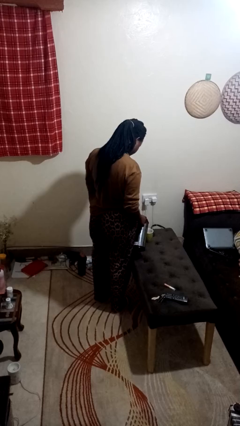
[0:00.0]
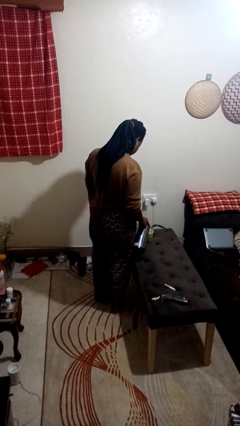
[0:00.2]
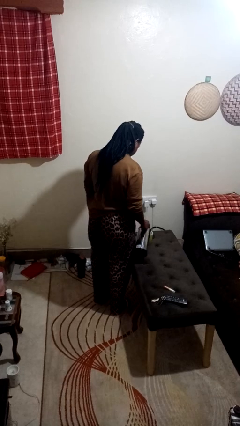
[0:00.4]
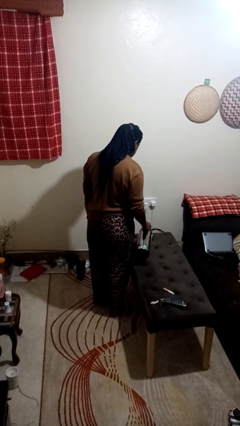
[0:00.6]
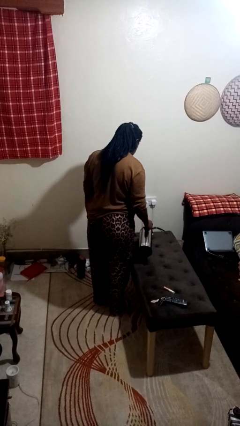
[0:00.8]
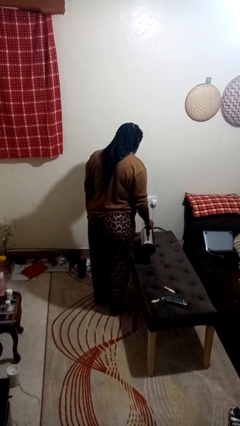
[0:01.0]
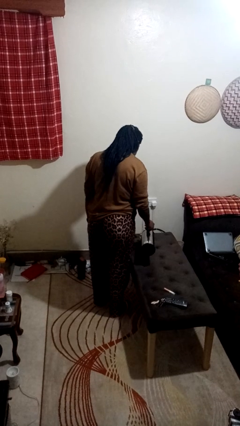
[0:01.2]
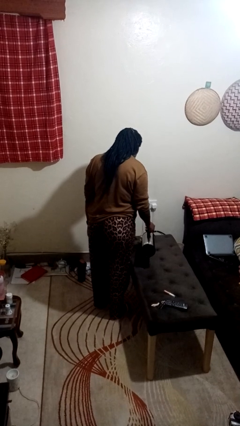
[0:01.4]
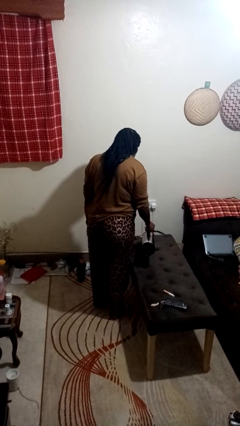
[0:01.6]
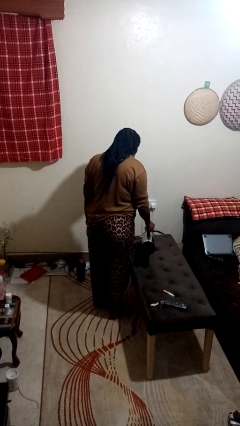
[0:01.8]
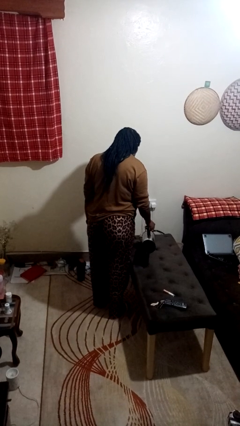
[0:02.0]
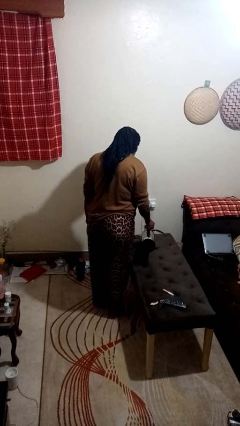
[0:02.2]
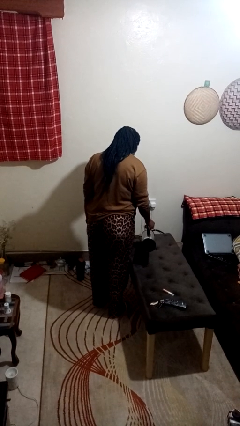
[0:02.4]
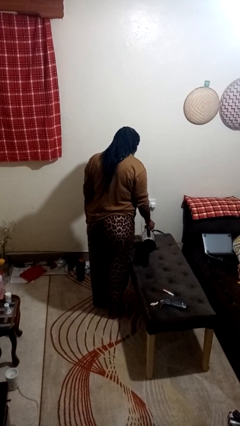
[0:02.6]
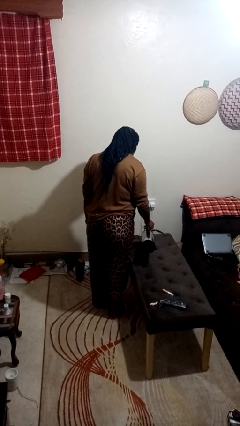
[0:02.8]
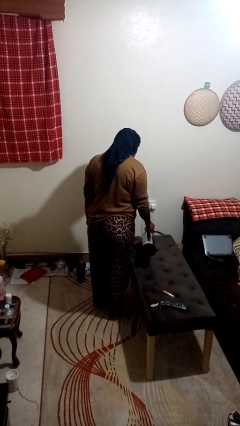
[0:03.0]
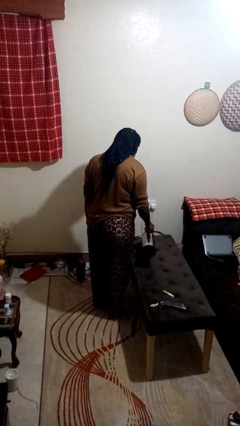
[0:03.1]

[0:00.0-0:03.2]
person pours coffee into mug

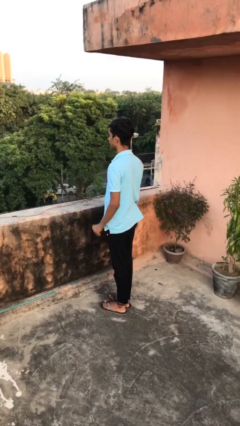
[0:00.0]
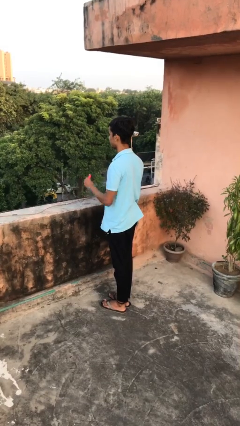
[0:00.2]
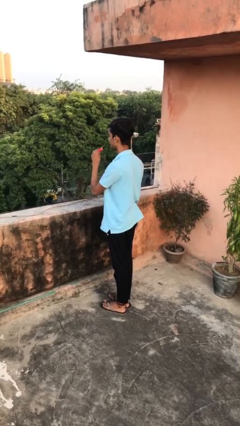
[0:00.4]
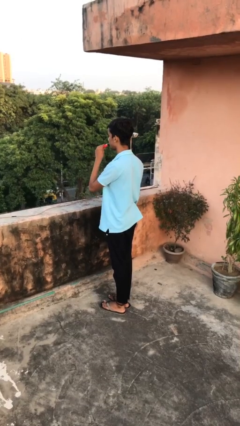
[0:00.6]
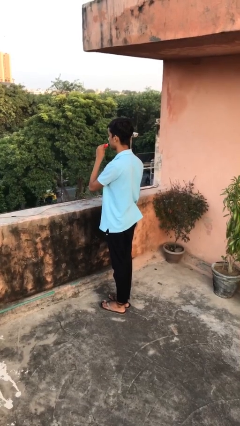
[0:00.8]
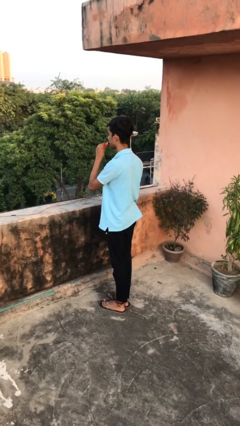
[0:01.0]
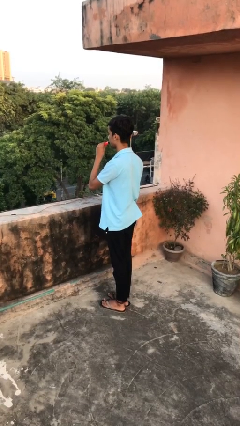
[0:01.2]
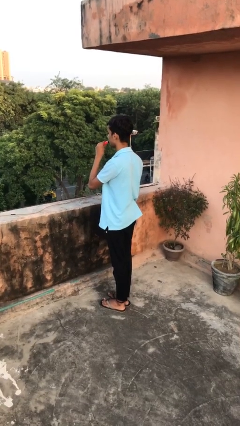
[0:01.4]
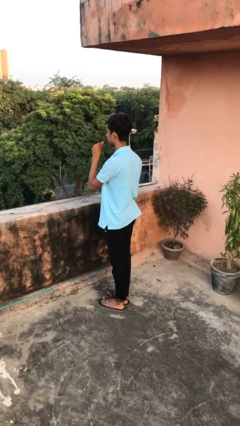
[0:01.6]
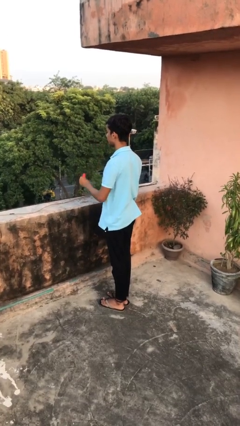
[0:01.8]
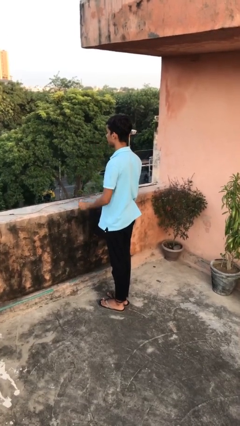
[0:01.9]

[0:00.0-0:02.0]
person vapes

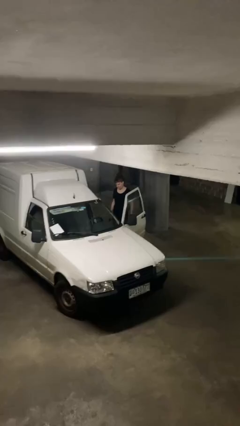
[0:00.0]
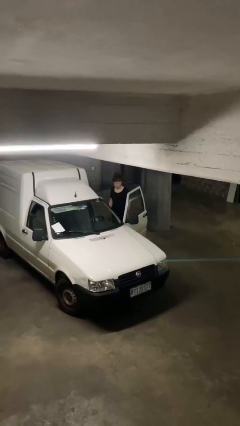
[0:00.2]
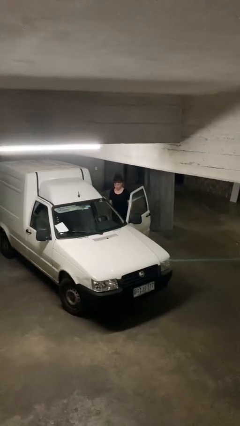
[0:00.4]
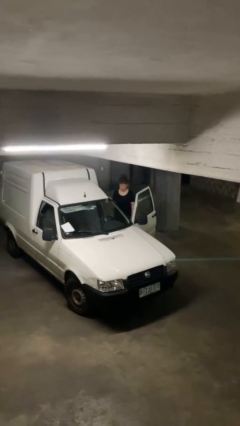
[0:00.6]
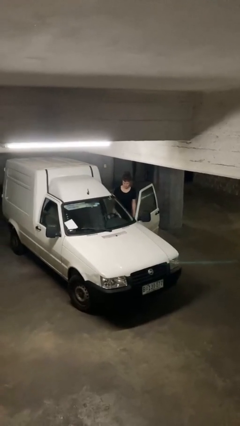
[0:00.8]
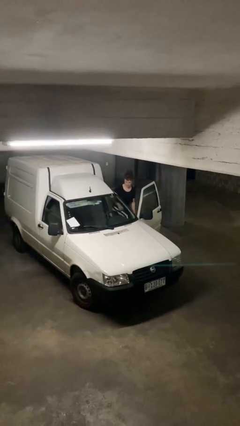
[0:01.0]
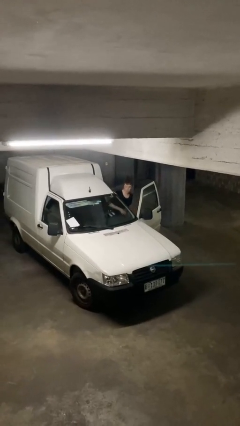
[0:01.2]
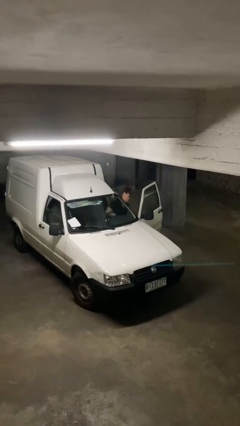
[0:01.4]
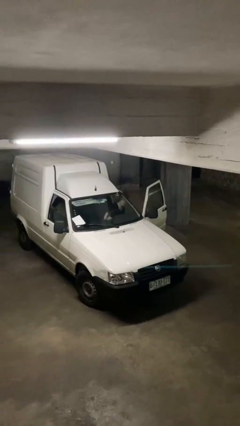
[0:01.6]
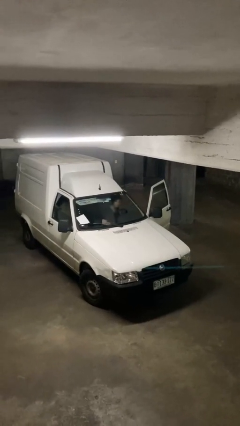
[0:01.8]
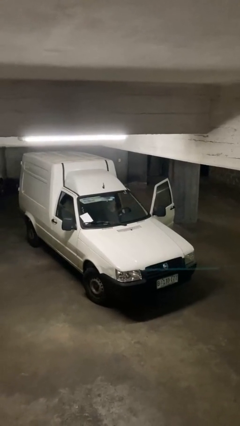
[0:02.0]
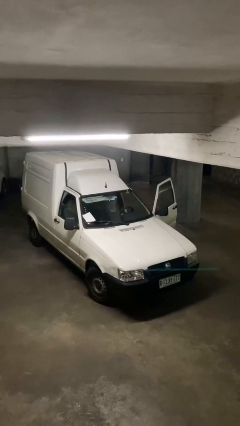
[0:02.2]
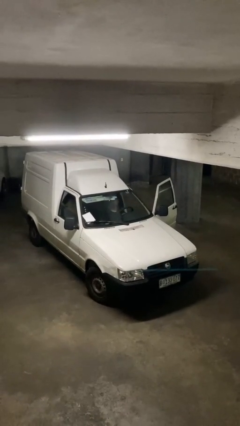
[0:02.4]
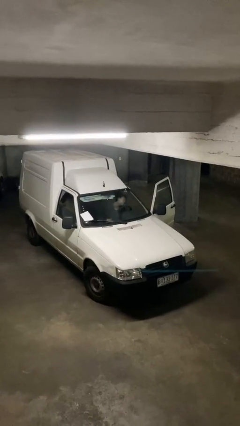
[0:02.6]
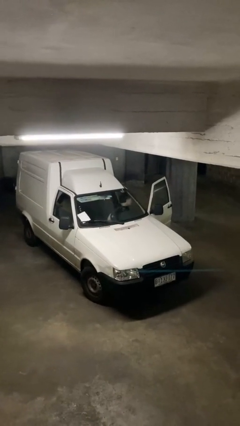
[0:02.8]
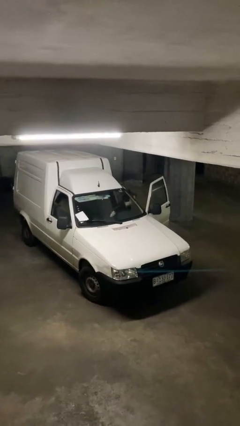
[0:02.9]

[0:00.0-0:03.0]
person enters car

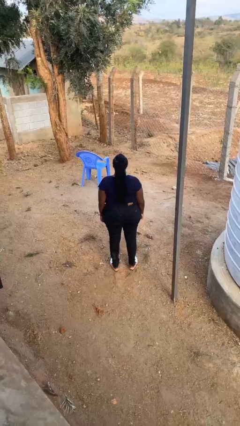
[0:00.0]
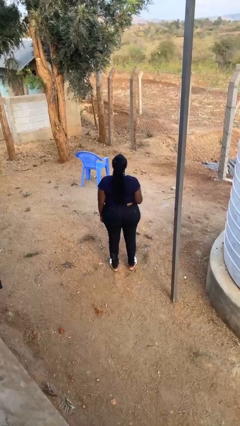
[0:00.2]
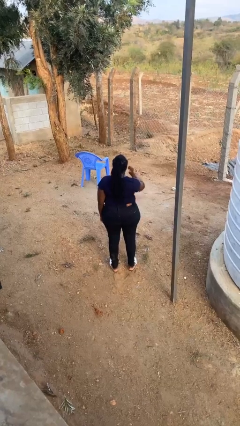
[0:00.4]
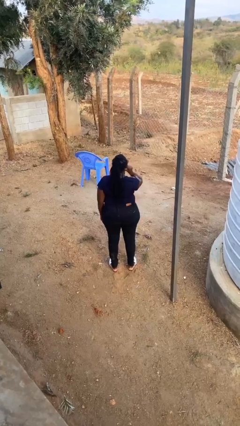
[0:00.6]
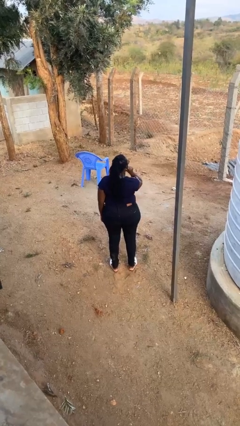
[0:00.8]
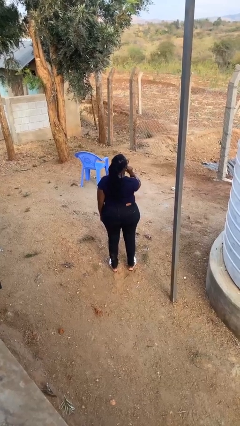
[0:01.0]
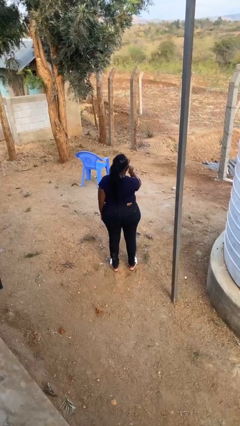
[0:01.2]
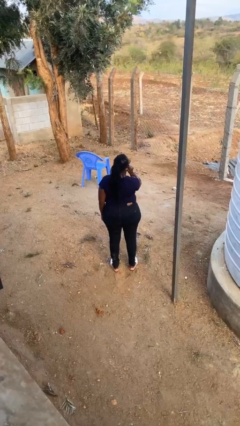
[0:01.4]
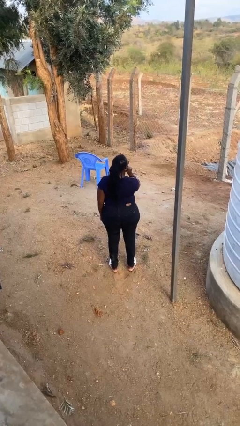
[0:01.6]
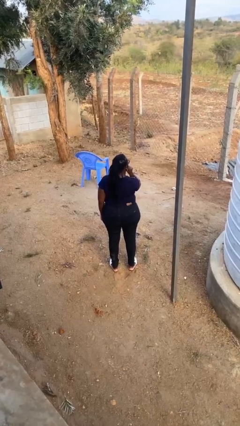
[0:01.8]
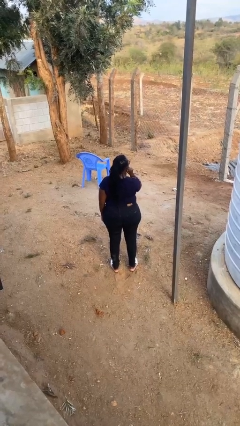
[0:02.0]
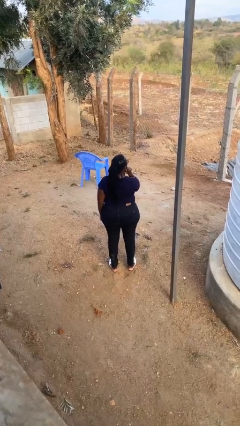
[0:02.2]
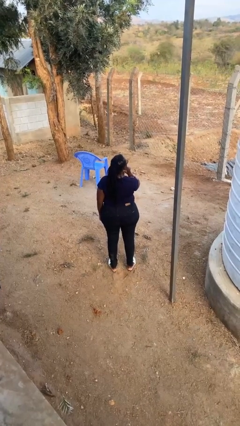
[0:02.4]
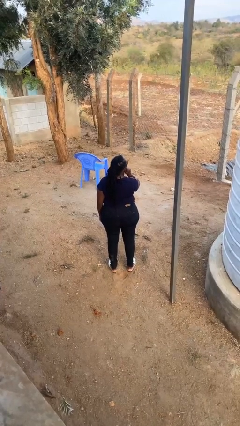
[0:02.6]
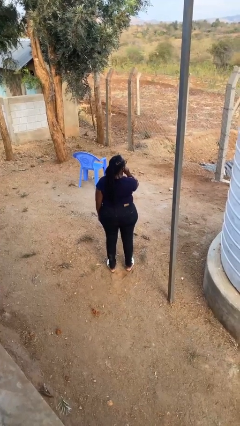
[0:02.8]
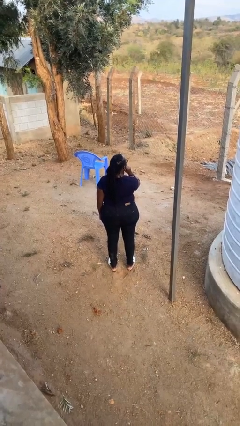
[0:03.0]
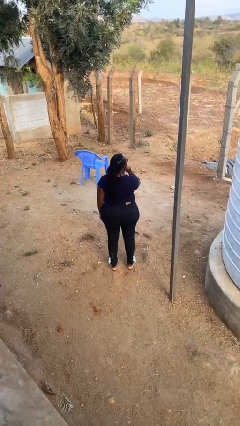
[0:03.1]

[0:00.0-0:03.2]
person touches earlobe

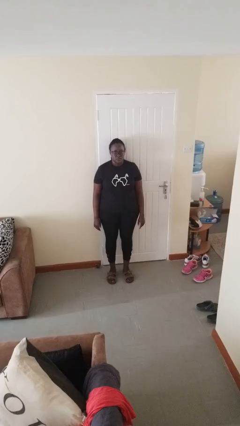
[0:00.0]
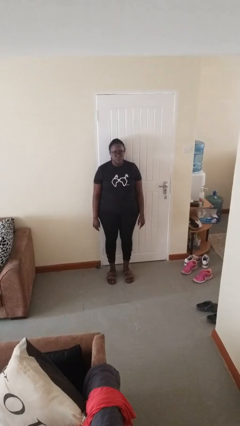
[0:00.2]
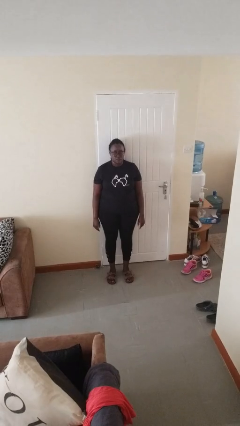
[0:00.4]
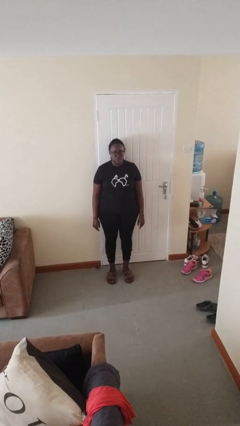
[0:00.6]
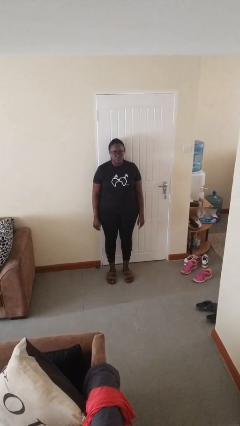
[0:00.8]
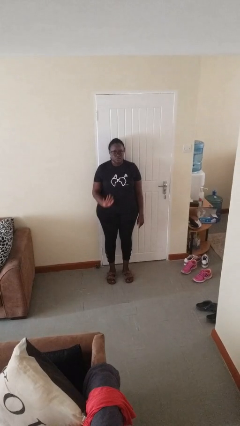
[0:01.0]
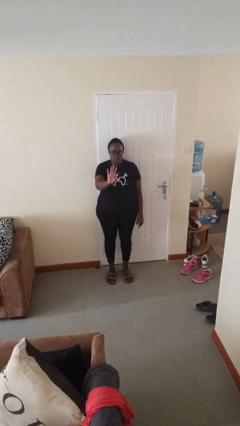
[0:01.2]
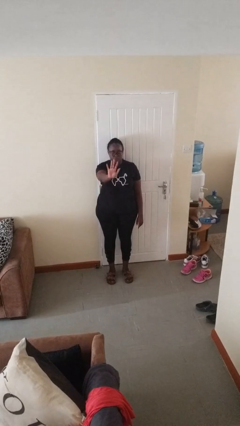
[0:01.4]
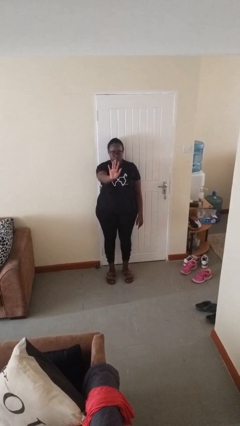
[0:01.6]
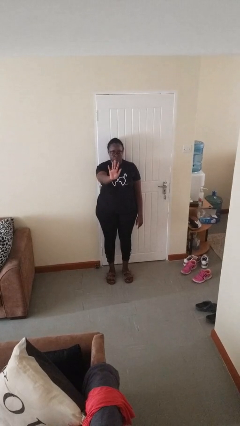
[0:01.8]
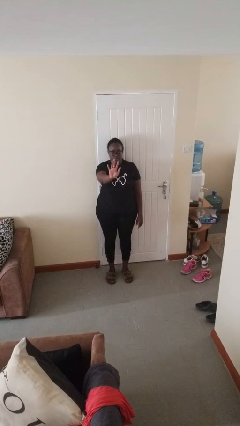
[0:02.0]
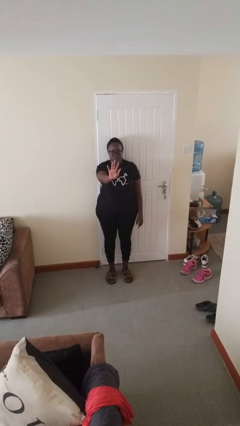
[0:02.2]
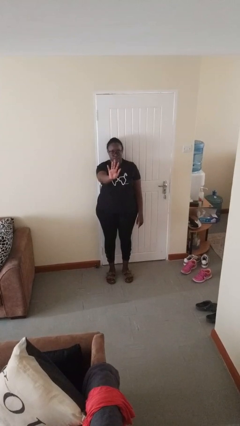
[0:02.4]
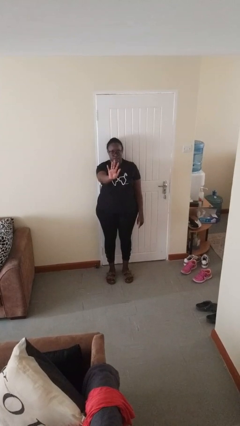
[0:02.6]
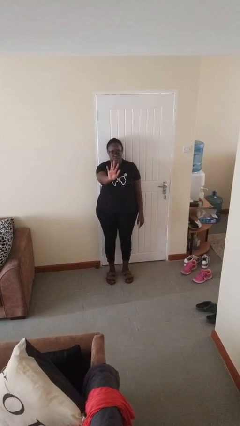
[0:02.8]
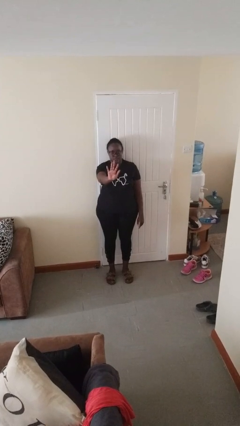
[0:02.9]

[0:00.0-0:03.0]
person gestures number five

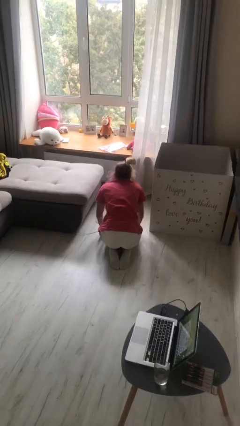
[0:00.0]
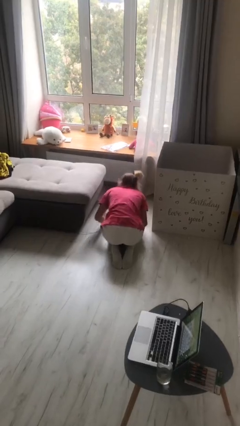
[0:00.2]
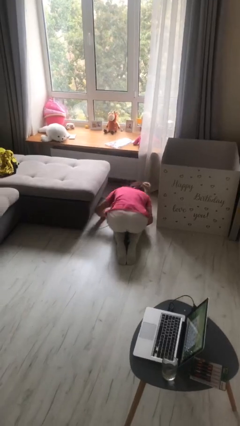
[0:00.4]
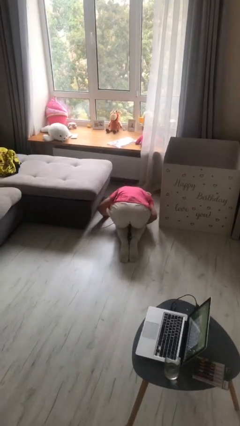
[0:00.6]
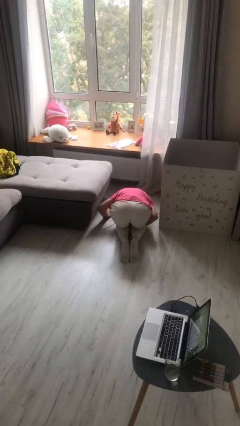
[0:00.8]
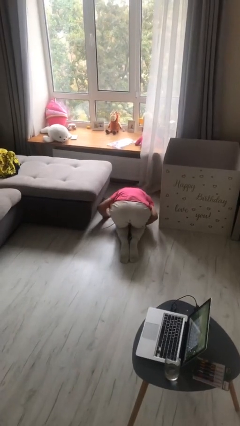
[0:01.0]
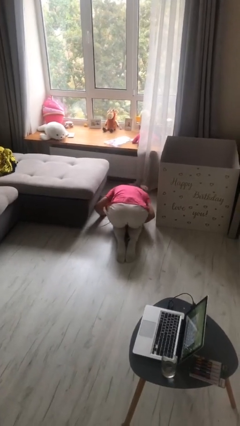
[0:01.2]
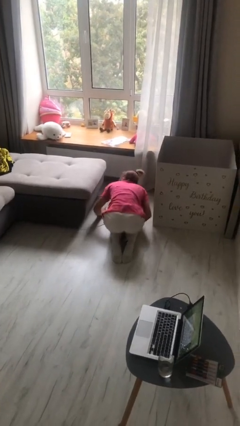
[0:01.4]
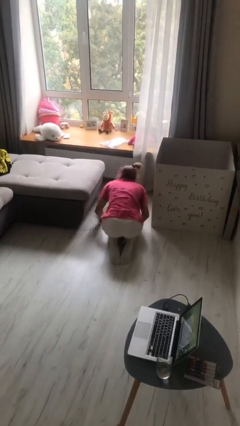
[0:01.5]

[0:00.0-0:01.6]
person searches under couch

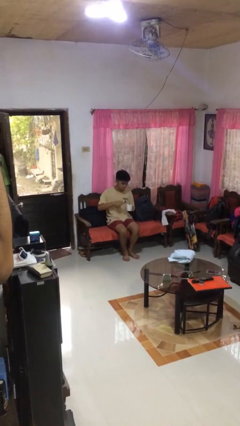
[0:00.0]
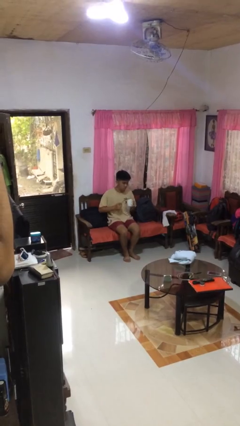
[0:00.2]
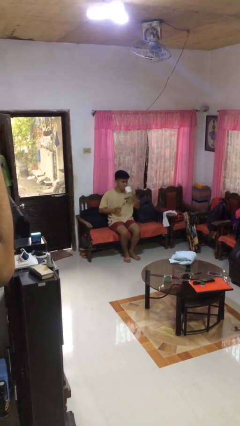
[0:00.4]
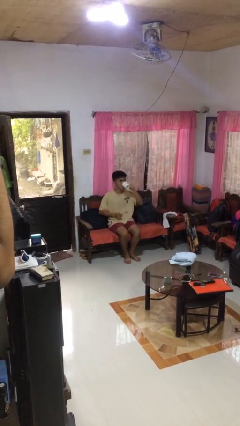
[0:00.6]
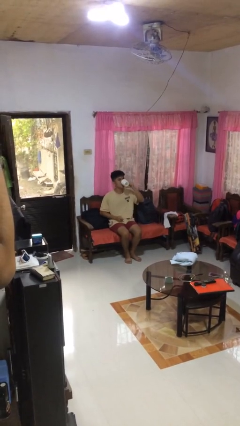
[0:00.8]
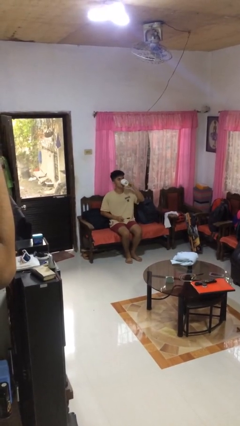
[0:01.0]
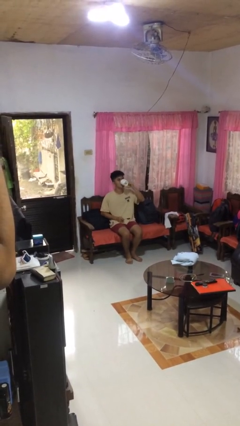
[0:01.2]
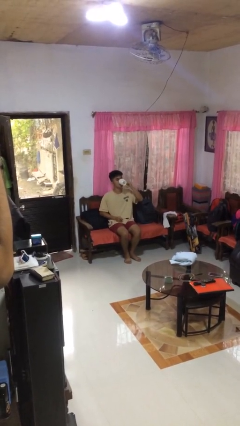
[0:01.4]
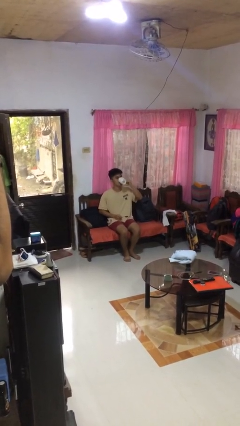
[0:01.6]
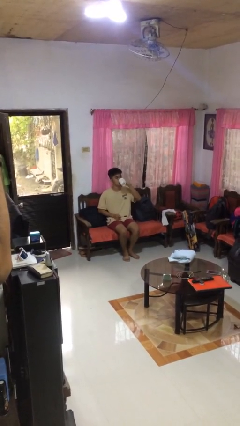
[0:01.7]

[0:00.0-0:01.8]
person drinks from mug
